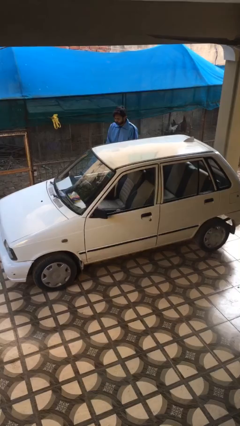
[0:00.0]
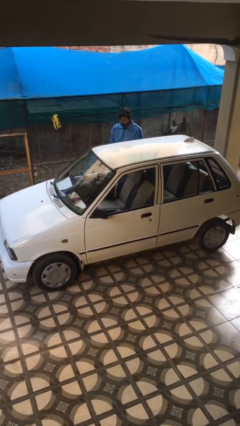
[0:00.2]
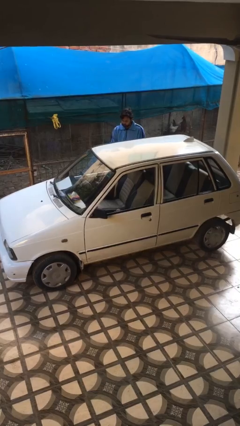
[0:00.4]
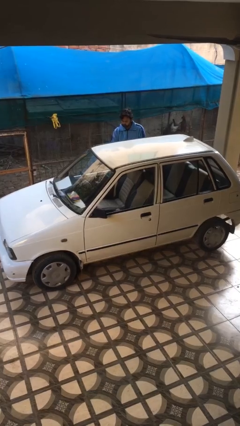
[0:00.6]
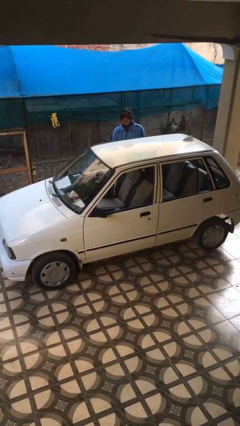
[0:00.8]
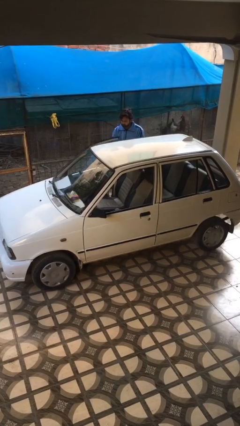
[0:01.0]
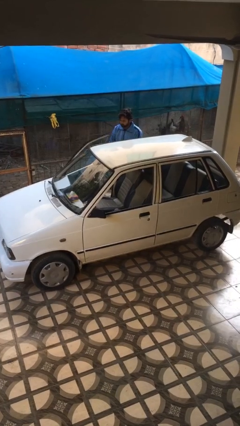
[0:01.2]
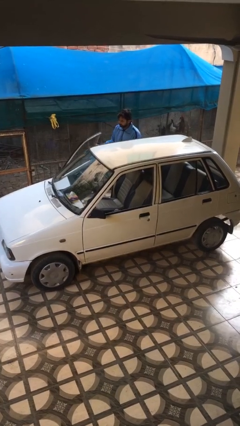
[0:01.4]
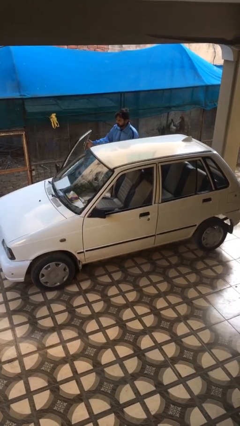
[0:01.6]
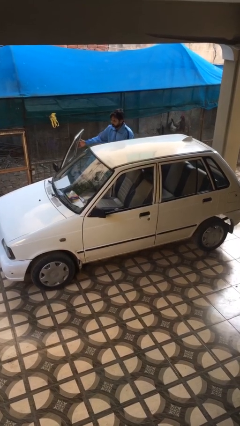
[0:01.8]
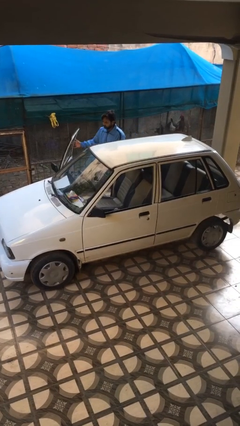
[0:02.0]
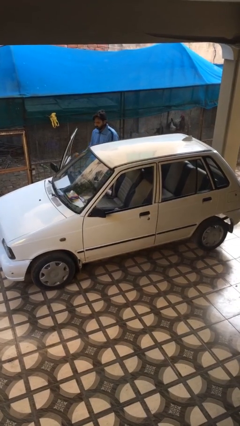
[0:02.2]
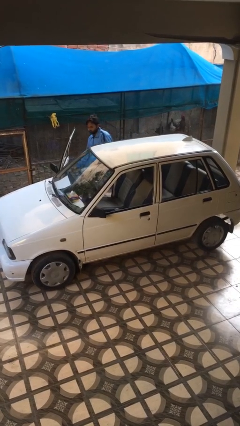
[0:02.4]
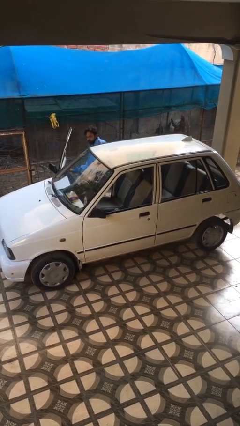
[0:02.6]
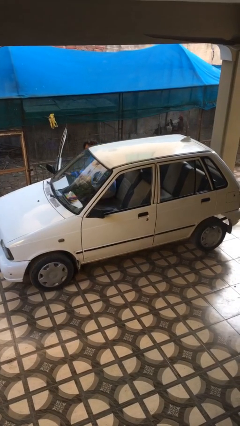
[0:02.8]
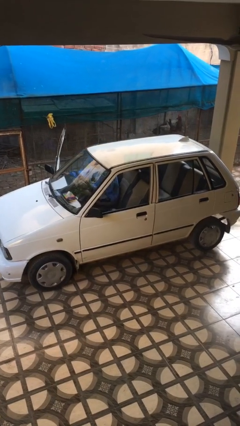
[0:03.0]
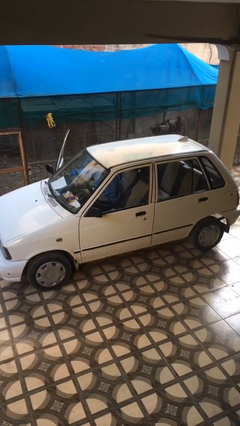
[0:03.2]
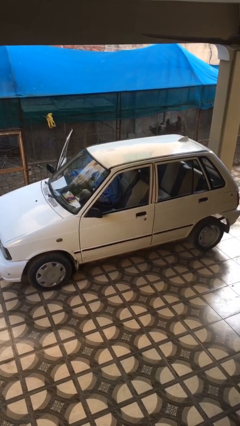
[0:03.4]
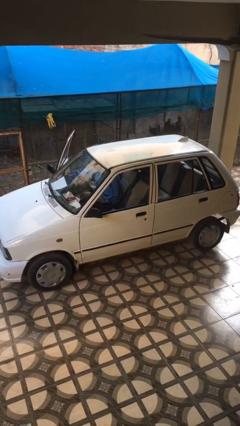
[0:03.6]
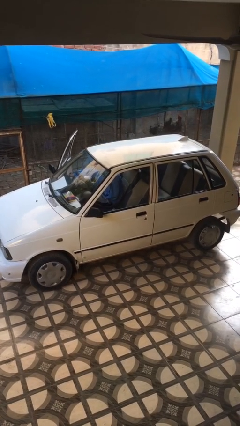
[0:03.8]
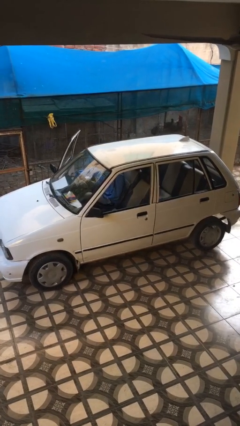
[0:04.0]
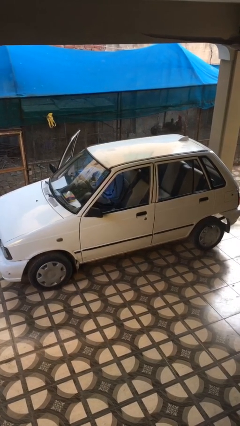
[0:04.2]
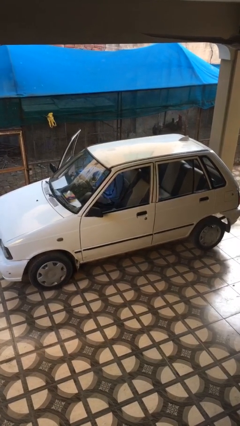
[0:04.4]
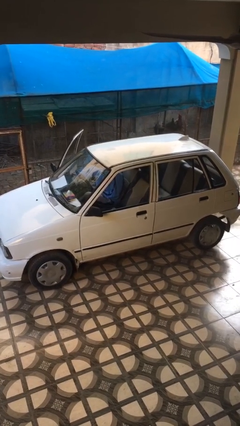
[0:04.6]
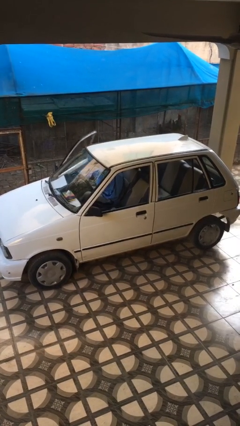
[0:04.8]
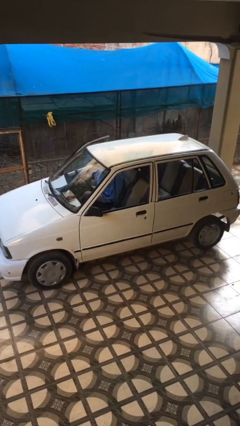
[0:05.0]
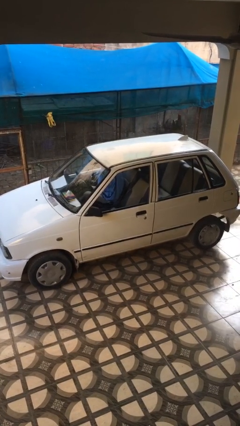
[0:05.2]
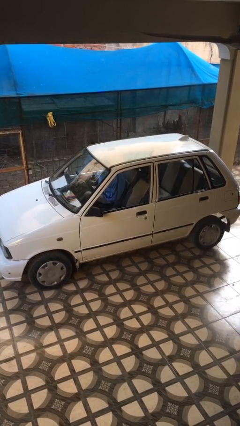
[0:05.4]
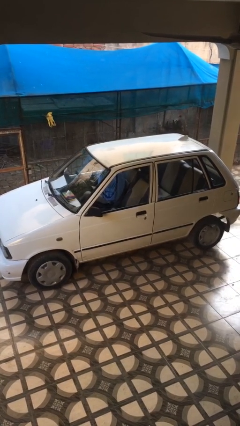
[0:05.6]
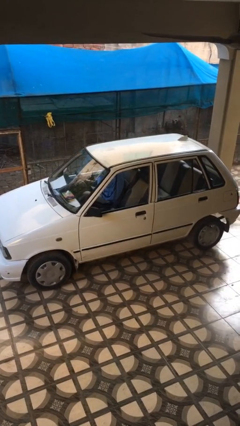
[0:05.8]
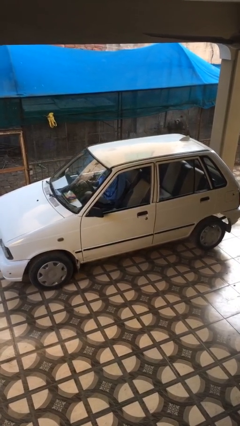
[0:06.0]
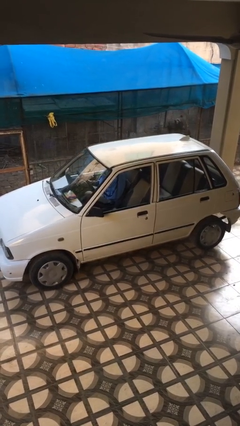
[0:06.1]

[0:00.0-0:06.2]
car picks up person

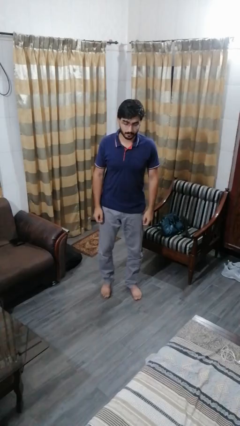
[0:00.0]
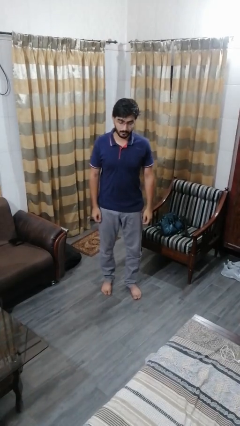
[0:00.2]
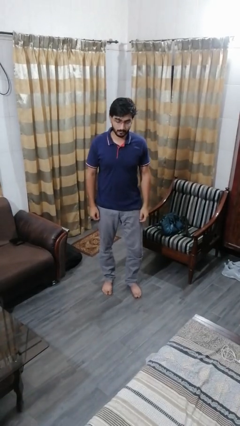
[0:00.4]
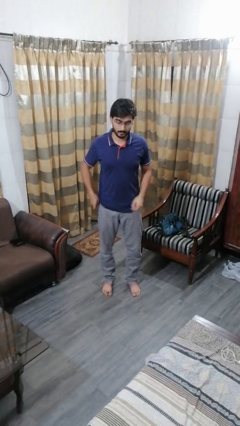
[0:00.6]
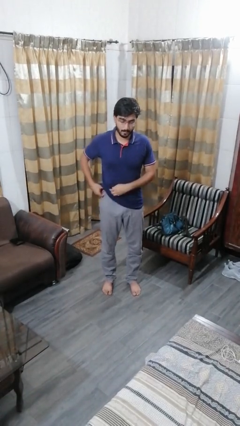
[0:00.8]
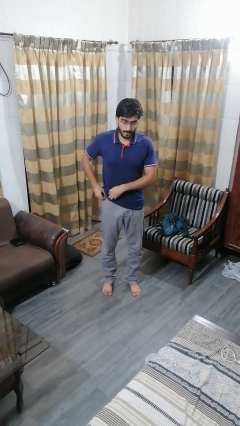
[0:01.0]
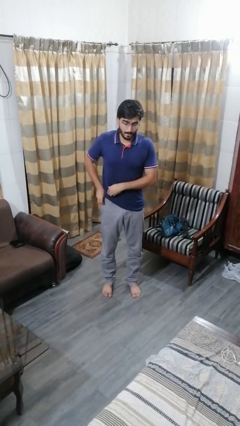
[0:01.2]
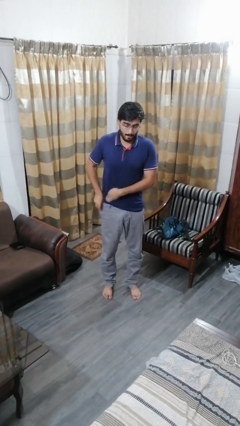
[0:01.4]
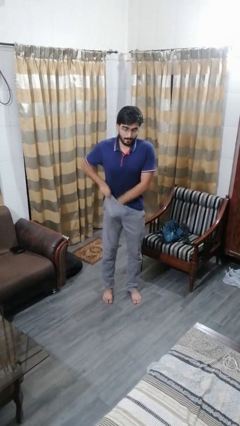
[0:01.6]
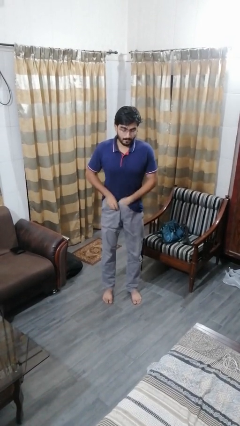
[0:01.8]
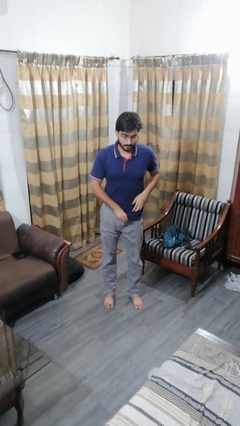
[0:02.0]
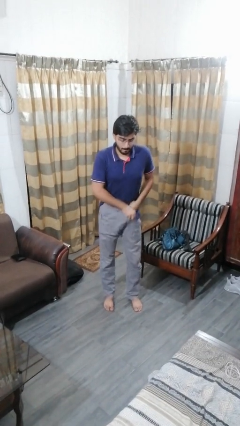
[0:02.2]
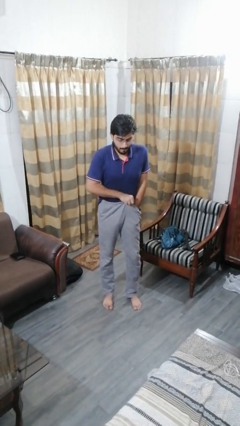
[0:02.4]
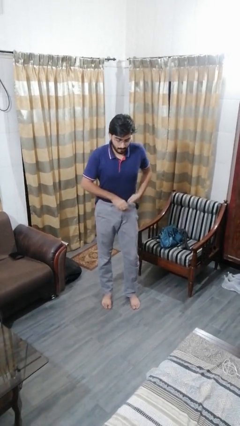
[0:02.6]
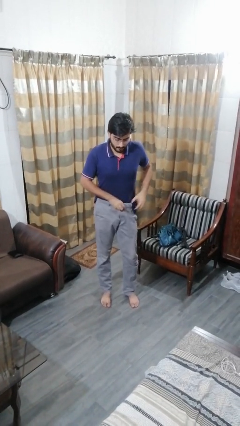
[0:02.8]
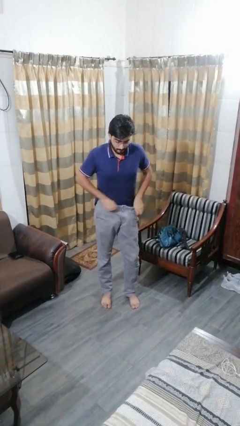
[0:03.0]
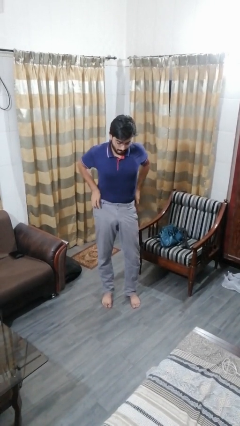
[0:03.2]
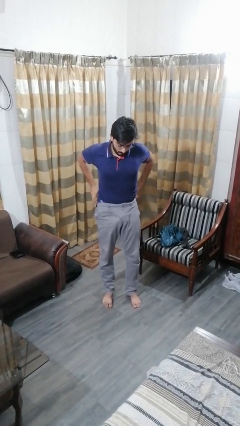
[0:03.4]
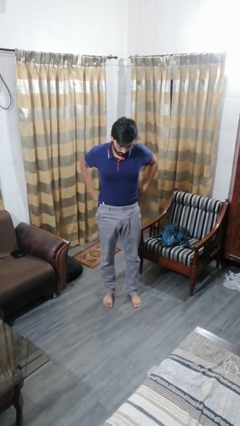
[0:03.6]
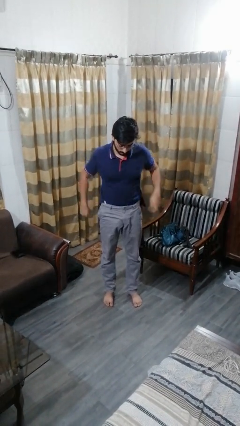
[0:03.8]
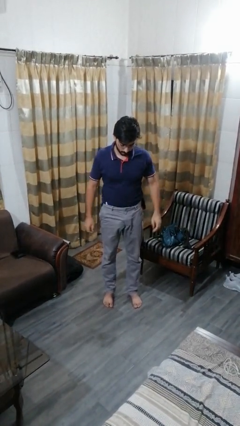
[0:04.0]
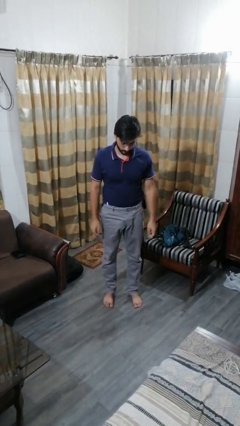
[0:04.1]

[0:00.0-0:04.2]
person tucks in shirt

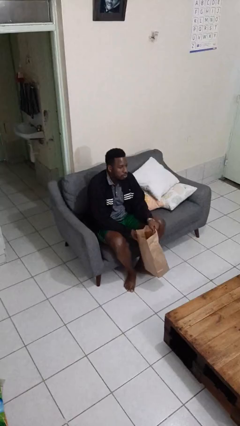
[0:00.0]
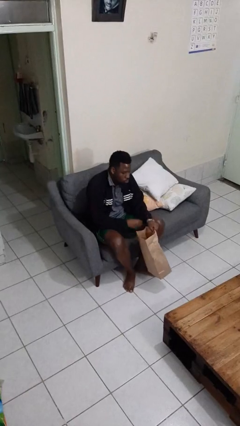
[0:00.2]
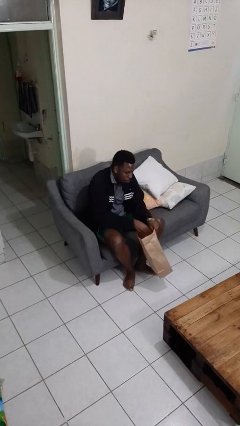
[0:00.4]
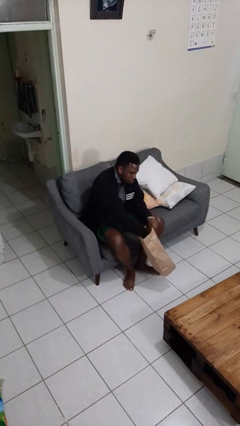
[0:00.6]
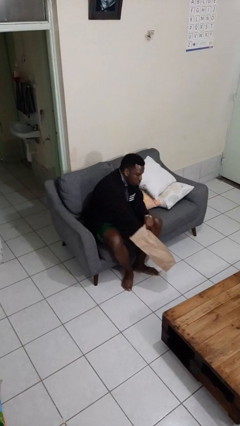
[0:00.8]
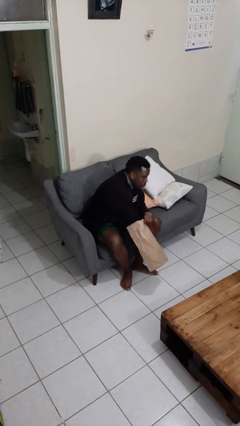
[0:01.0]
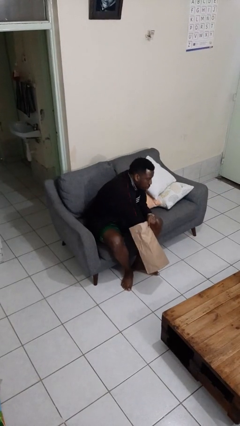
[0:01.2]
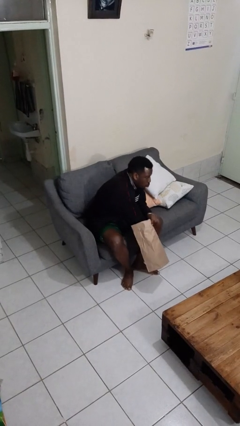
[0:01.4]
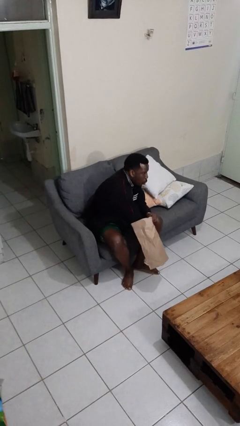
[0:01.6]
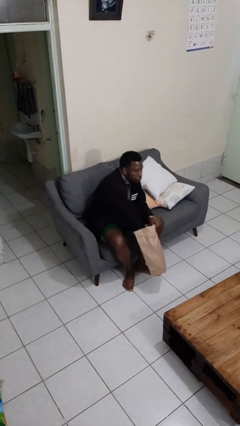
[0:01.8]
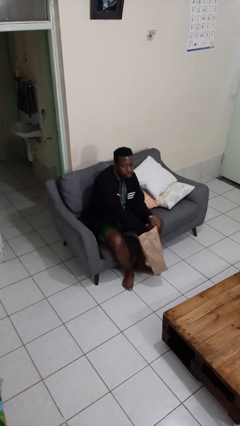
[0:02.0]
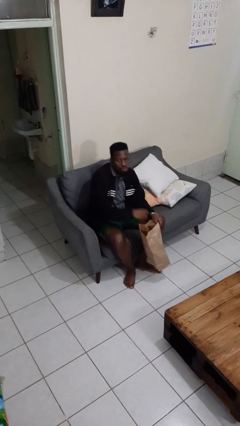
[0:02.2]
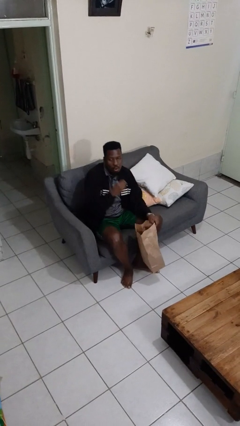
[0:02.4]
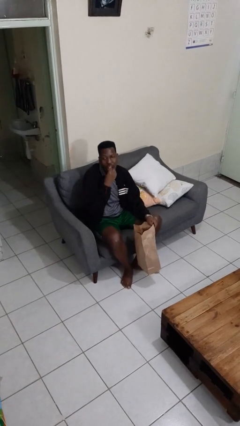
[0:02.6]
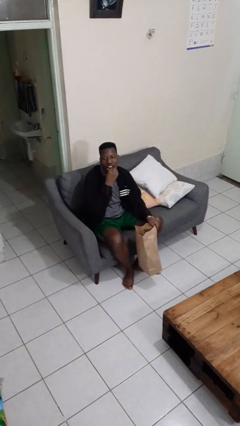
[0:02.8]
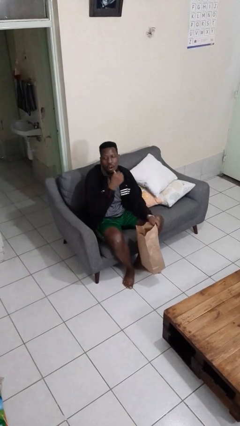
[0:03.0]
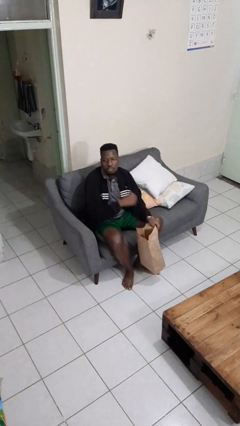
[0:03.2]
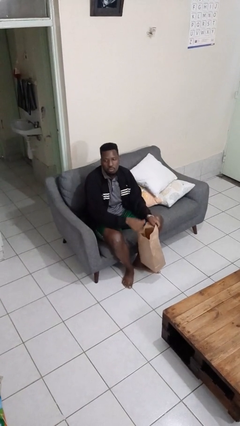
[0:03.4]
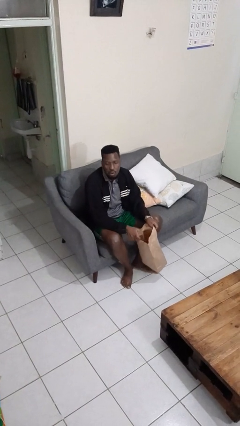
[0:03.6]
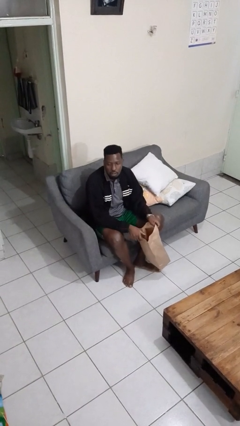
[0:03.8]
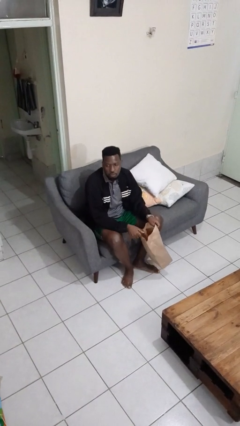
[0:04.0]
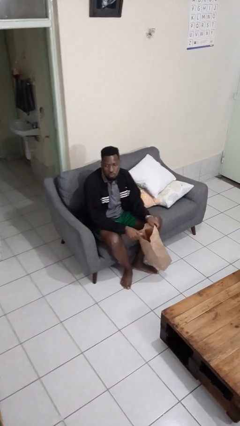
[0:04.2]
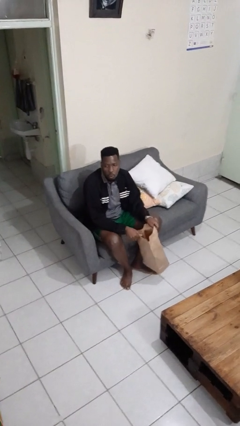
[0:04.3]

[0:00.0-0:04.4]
person eats snack from bag

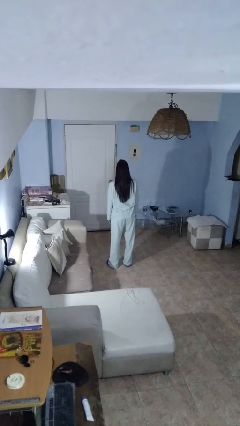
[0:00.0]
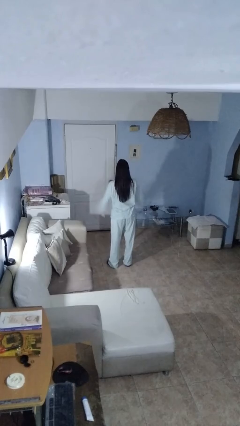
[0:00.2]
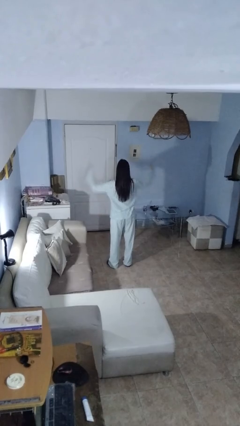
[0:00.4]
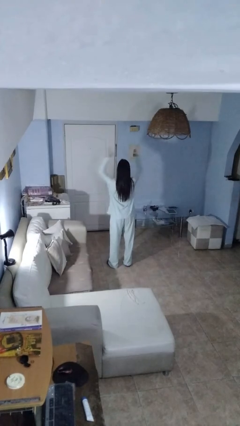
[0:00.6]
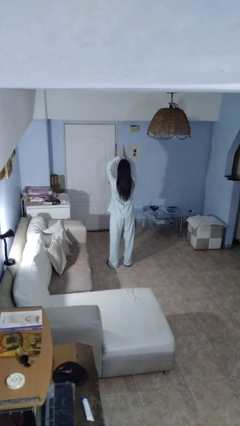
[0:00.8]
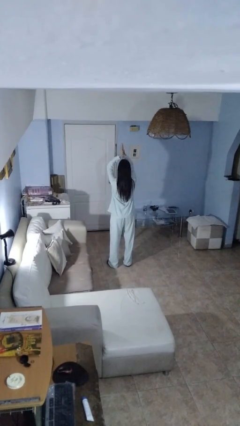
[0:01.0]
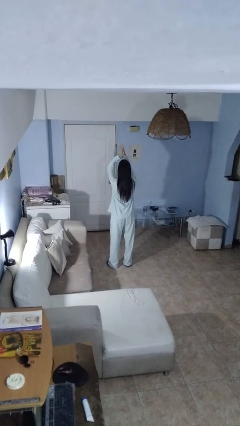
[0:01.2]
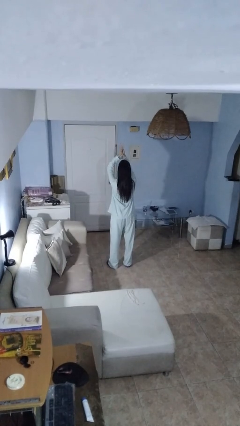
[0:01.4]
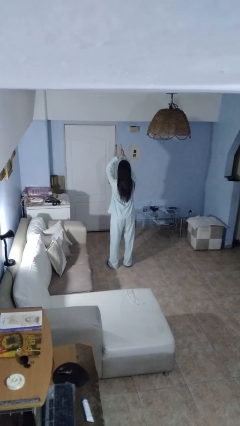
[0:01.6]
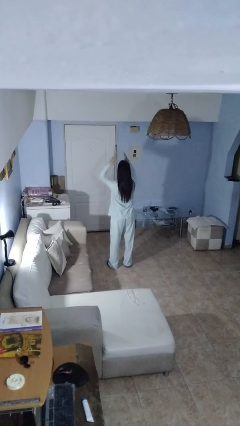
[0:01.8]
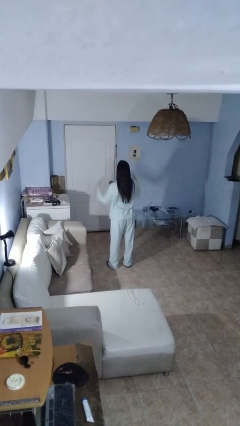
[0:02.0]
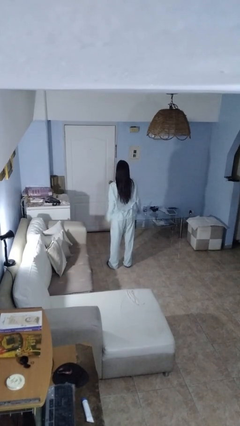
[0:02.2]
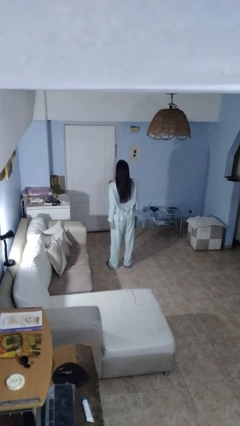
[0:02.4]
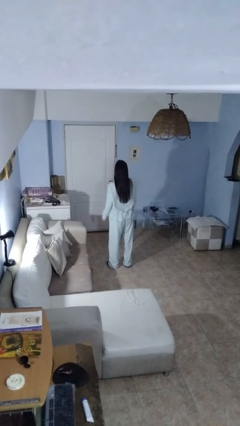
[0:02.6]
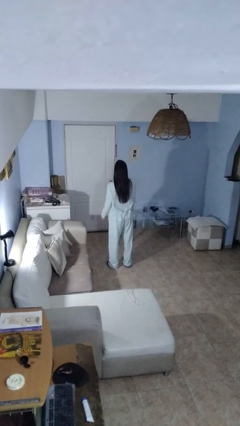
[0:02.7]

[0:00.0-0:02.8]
person claps hands
